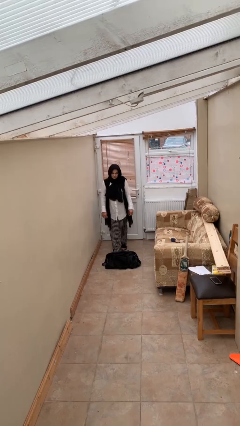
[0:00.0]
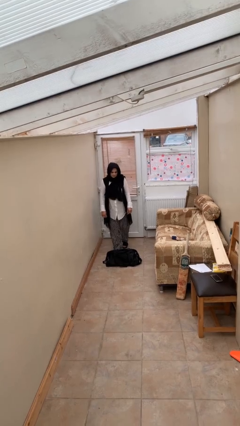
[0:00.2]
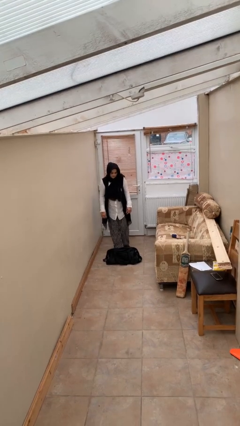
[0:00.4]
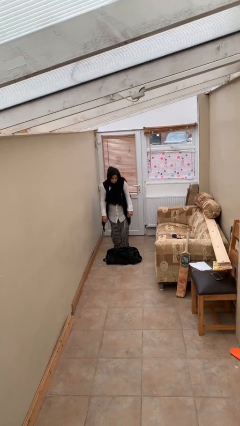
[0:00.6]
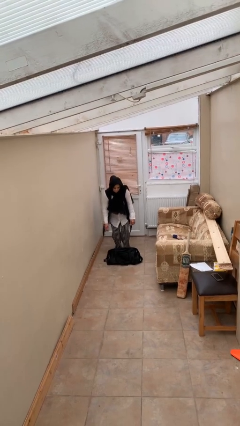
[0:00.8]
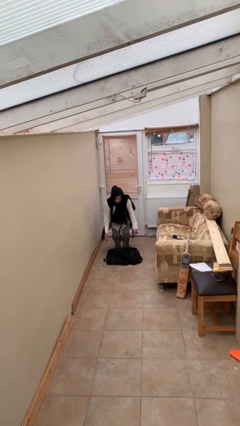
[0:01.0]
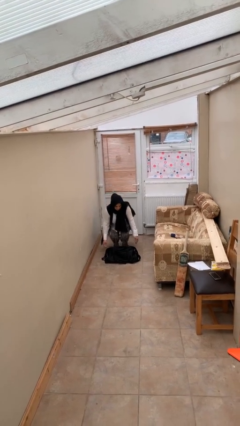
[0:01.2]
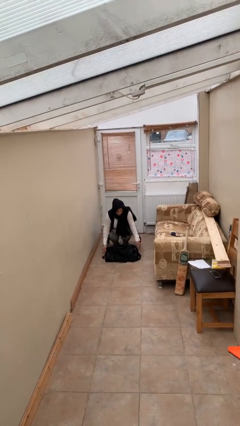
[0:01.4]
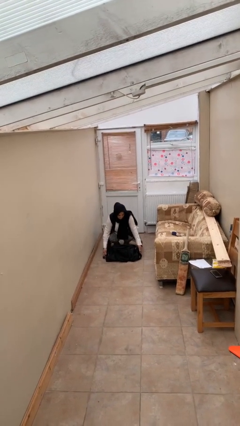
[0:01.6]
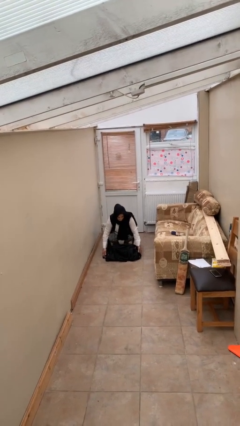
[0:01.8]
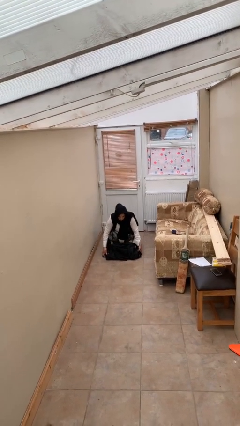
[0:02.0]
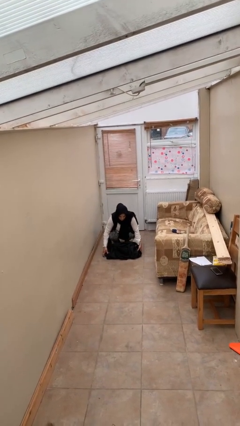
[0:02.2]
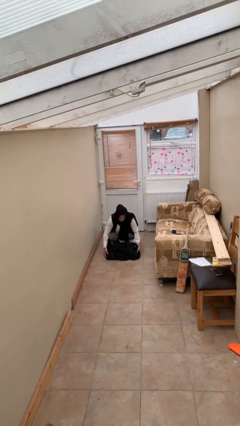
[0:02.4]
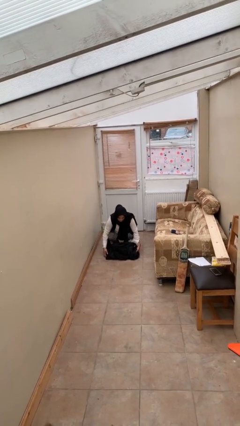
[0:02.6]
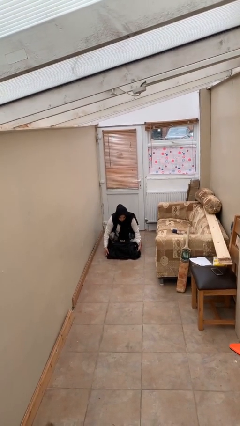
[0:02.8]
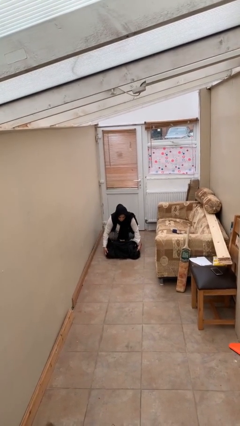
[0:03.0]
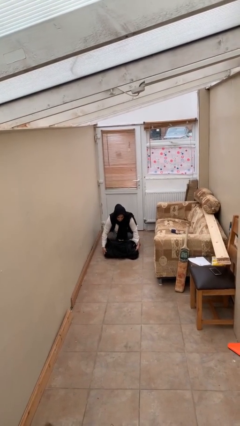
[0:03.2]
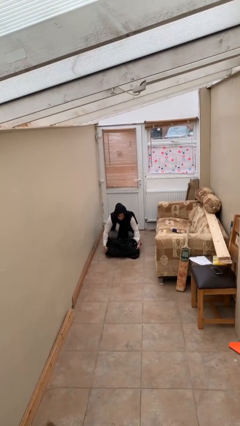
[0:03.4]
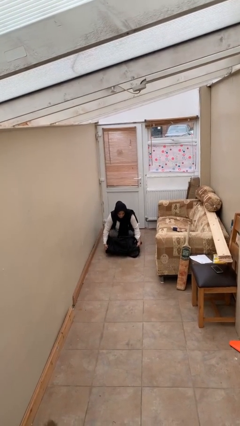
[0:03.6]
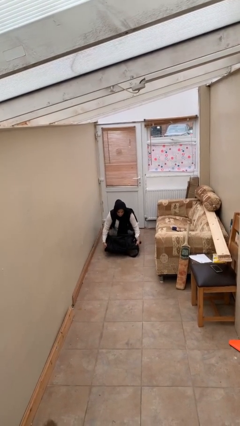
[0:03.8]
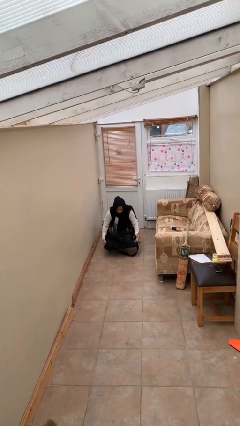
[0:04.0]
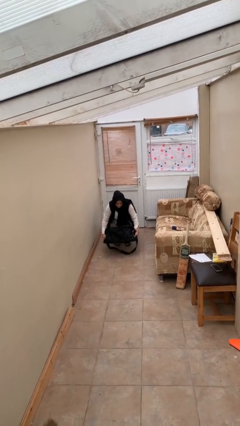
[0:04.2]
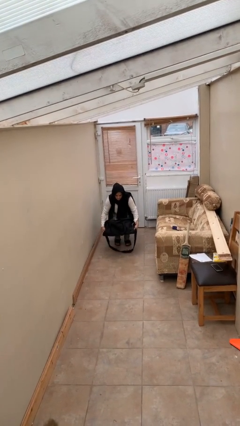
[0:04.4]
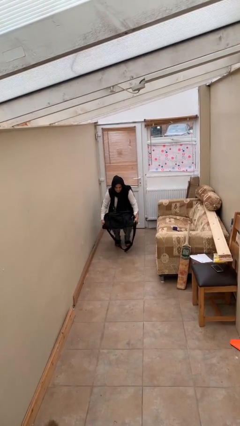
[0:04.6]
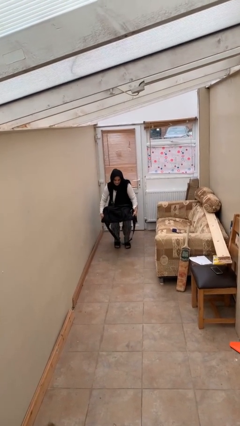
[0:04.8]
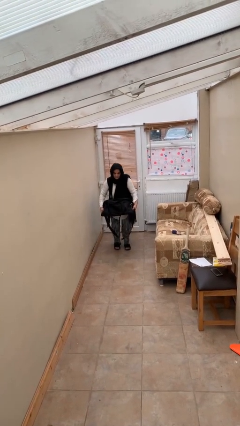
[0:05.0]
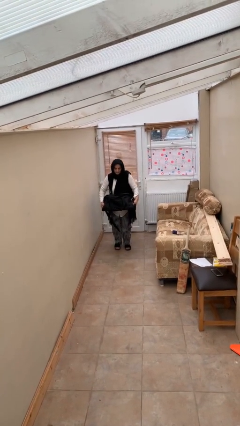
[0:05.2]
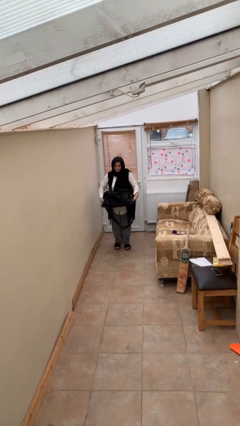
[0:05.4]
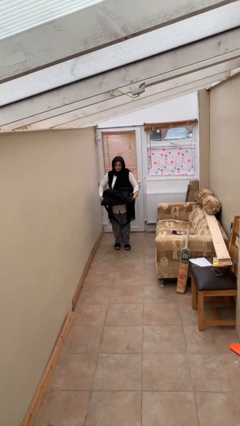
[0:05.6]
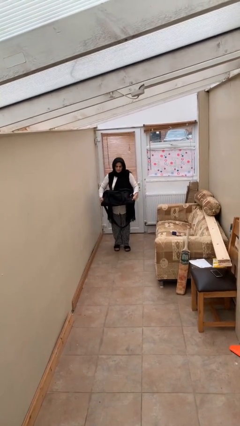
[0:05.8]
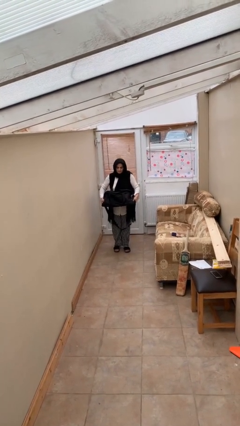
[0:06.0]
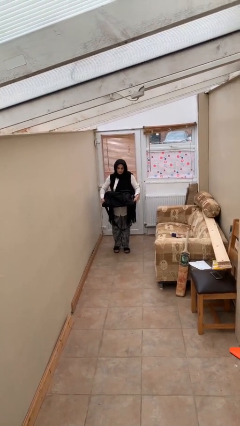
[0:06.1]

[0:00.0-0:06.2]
person picks up object from floor

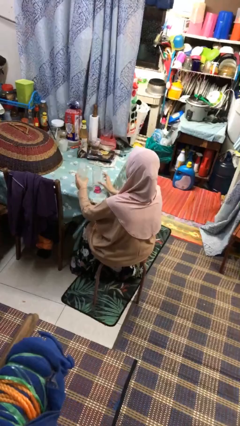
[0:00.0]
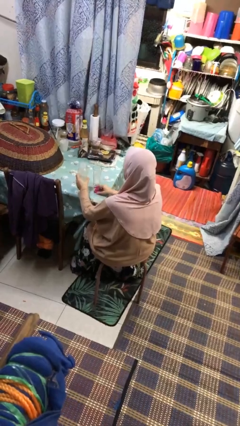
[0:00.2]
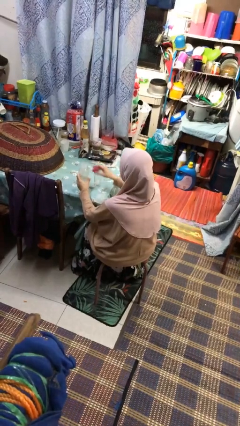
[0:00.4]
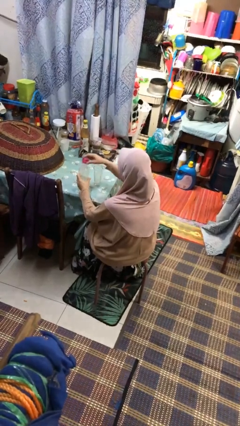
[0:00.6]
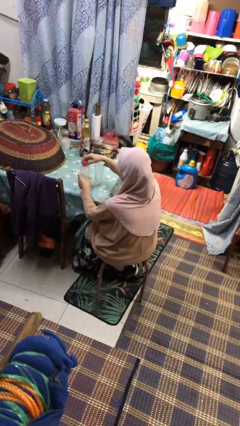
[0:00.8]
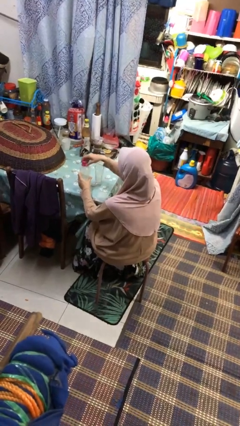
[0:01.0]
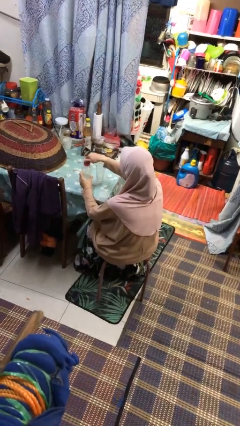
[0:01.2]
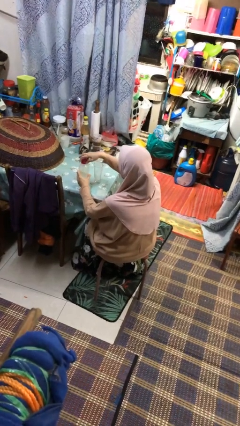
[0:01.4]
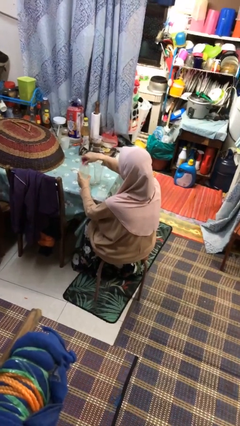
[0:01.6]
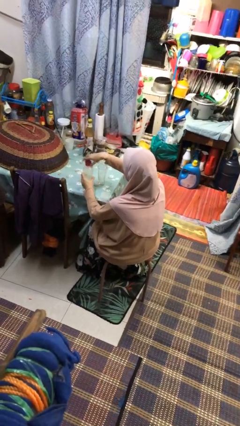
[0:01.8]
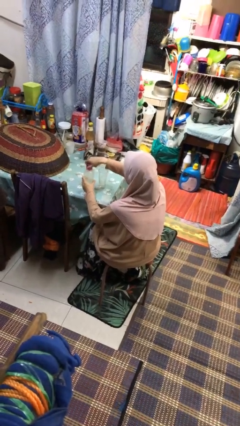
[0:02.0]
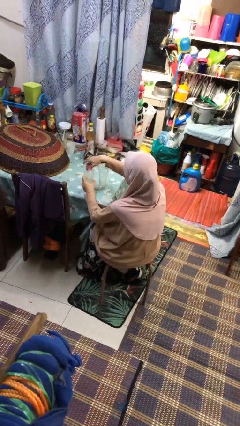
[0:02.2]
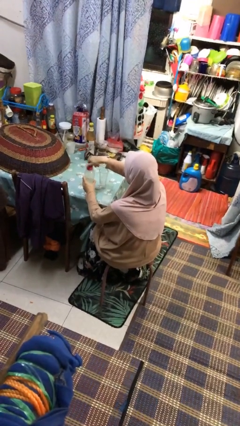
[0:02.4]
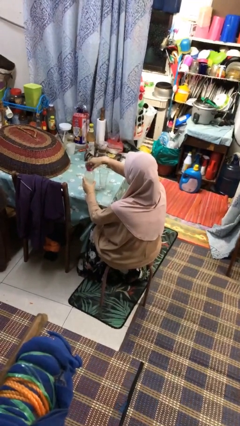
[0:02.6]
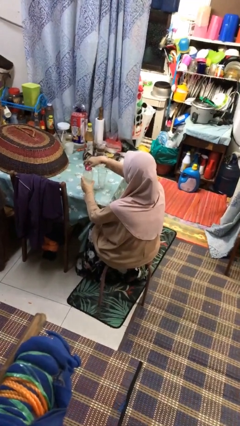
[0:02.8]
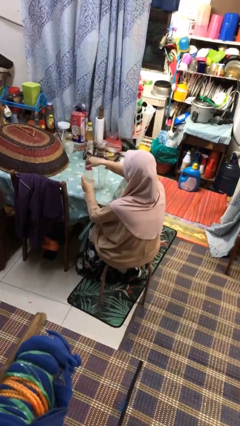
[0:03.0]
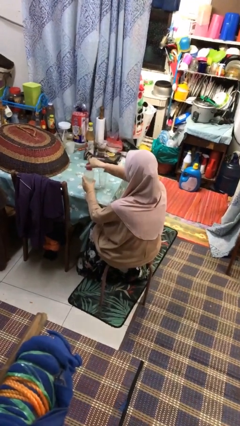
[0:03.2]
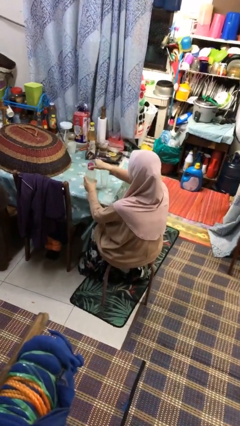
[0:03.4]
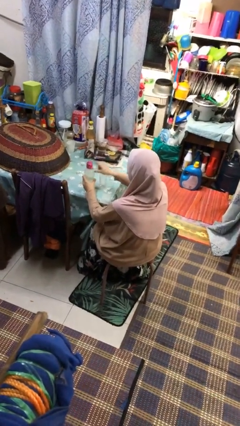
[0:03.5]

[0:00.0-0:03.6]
person screws lid to bottle

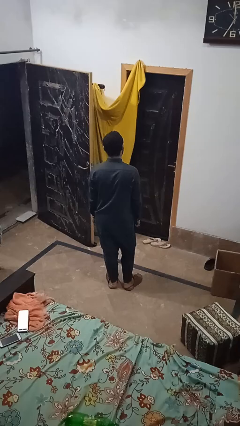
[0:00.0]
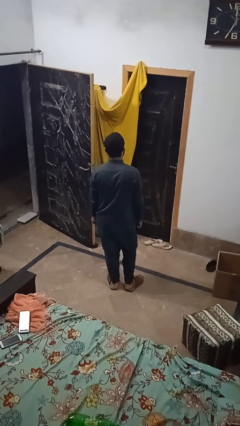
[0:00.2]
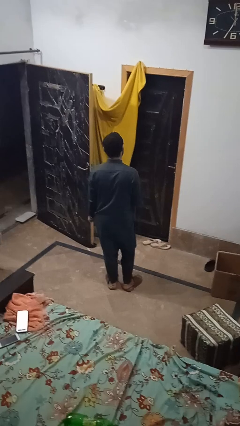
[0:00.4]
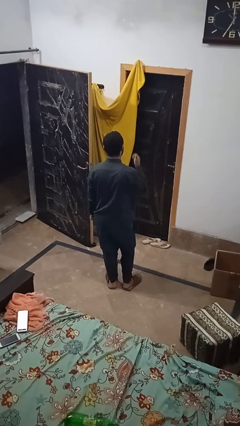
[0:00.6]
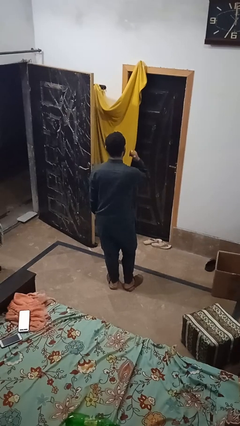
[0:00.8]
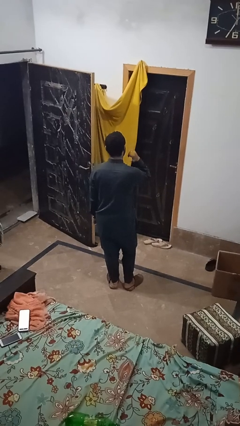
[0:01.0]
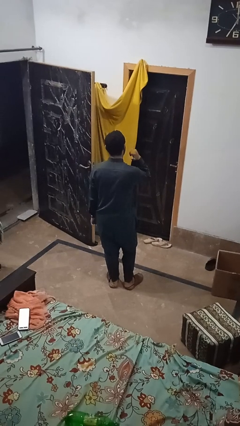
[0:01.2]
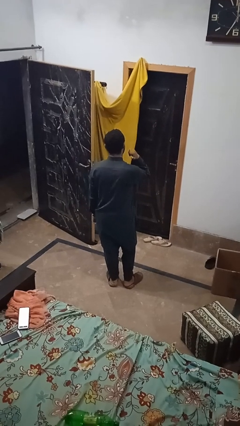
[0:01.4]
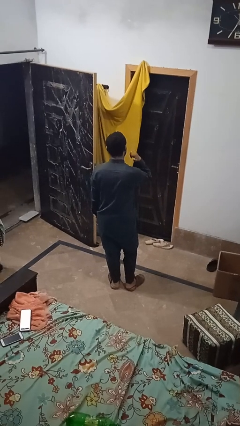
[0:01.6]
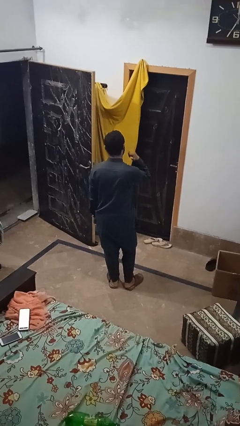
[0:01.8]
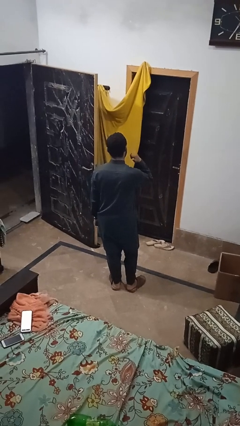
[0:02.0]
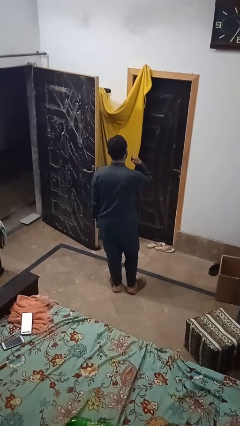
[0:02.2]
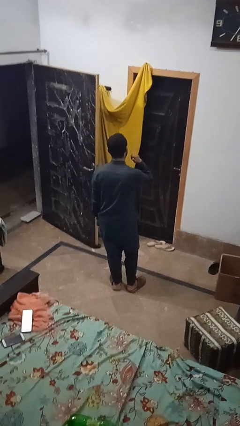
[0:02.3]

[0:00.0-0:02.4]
person gestures behind me

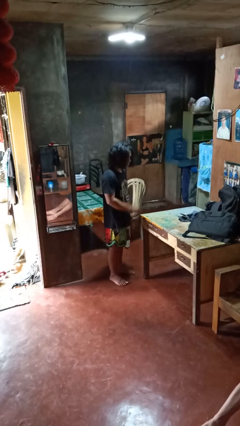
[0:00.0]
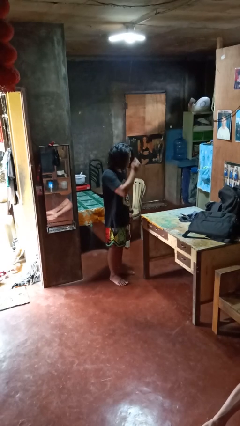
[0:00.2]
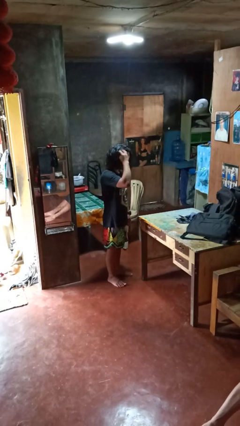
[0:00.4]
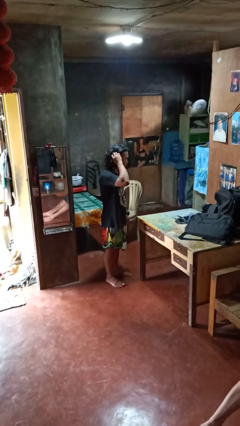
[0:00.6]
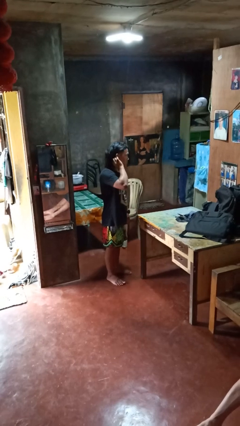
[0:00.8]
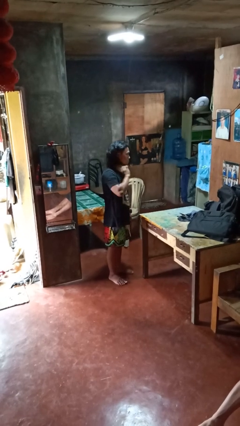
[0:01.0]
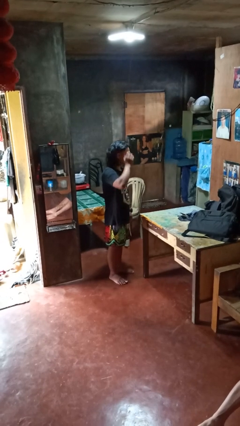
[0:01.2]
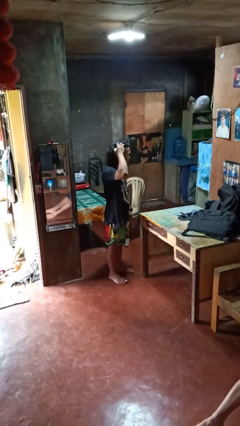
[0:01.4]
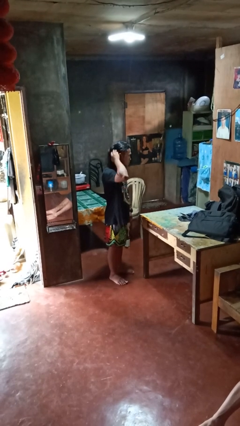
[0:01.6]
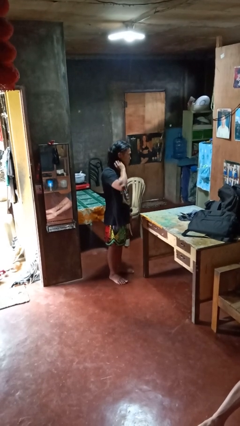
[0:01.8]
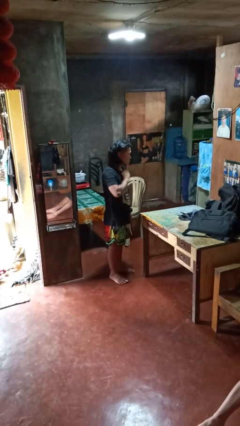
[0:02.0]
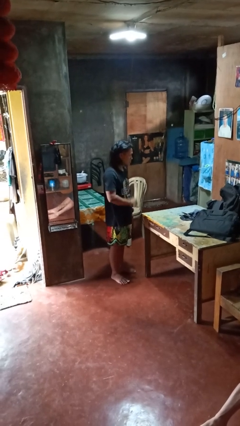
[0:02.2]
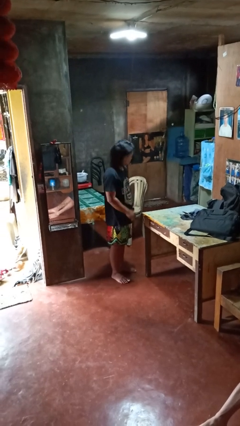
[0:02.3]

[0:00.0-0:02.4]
person strokes hair

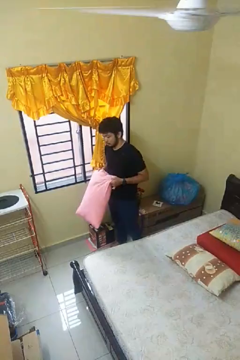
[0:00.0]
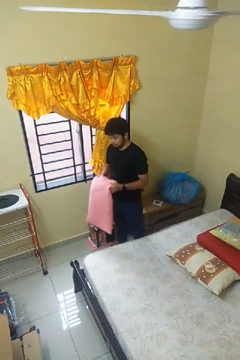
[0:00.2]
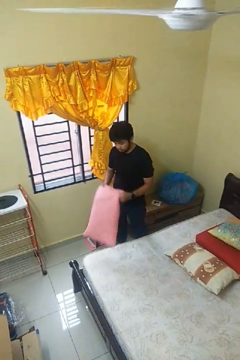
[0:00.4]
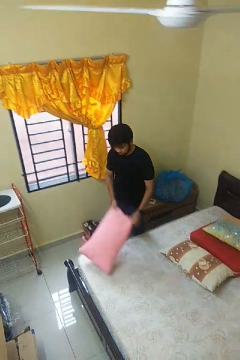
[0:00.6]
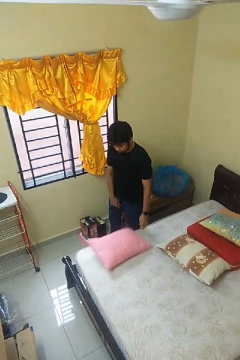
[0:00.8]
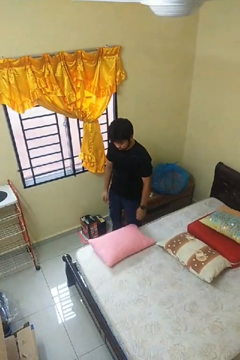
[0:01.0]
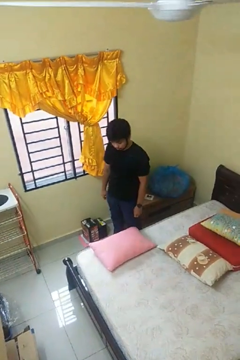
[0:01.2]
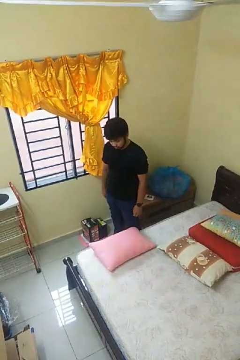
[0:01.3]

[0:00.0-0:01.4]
person puts down object on bed

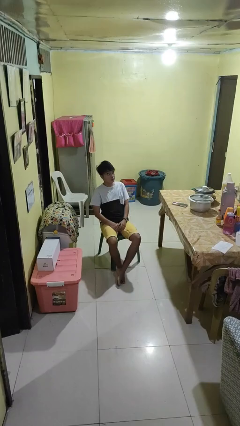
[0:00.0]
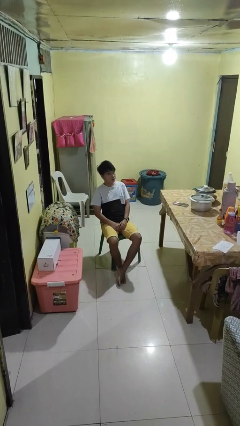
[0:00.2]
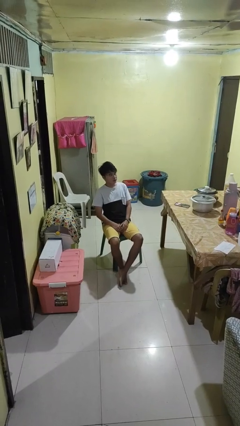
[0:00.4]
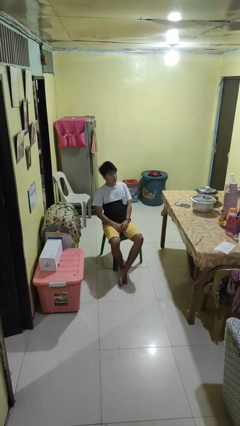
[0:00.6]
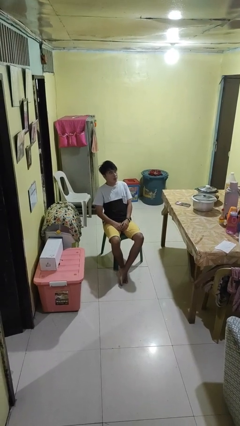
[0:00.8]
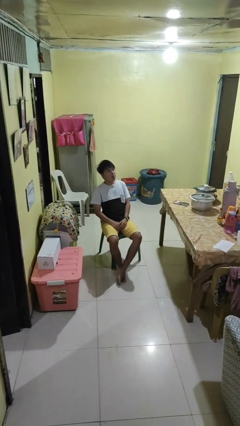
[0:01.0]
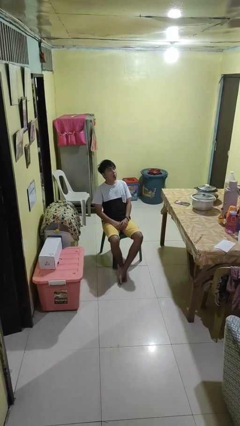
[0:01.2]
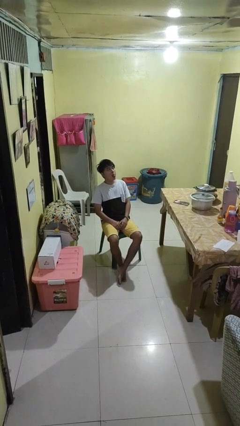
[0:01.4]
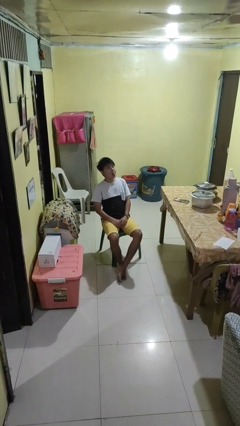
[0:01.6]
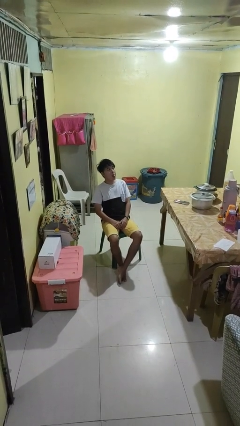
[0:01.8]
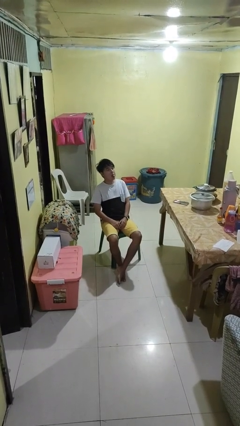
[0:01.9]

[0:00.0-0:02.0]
person sticks out tongue
